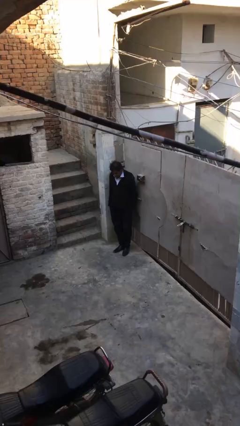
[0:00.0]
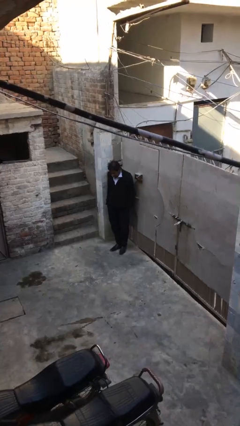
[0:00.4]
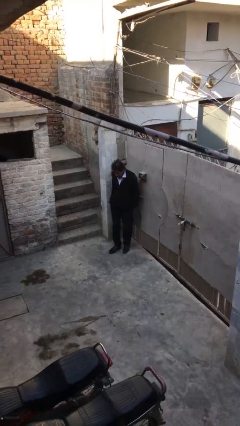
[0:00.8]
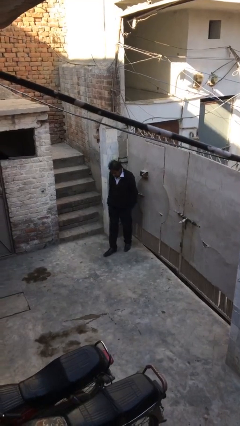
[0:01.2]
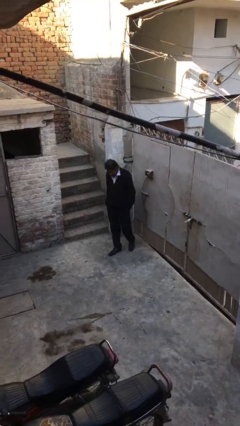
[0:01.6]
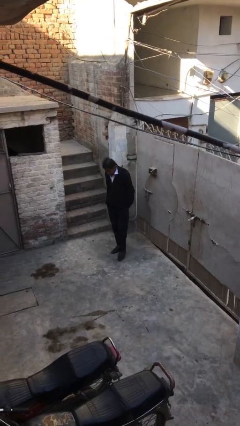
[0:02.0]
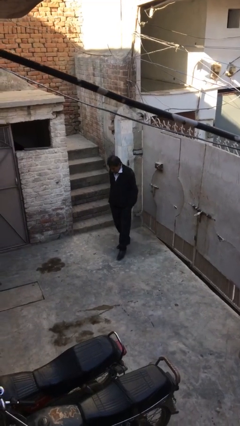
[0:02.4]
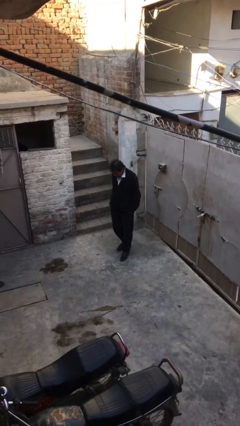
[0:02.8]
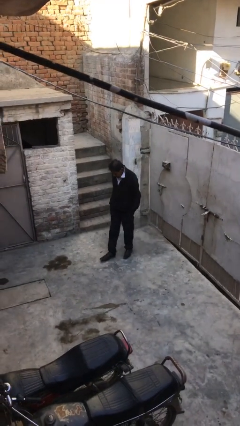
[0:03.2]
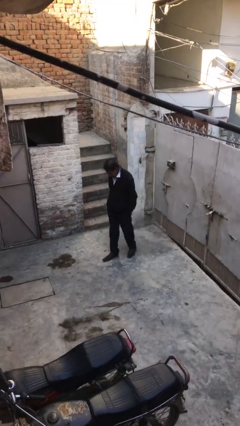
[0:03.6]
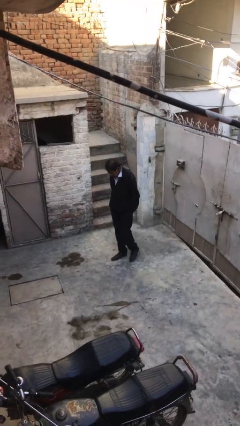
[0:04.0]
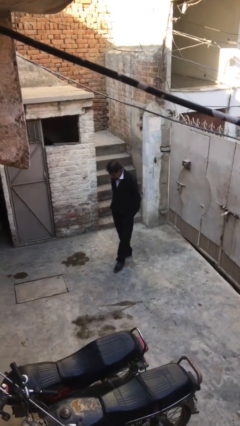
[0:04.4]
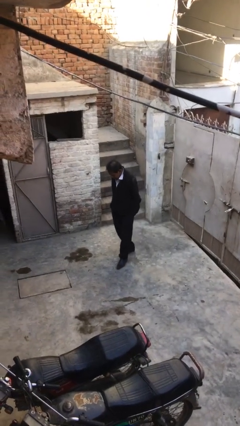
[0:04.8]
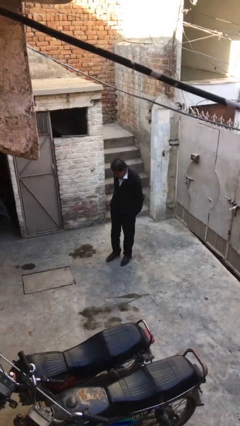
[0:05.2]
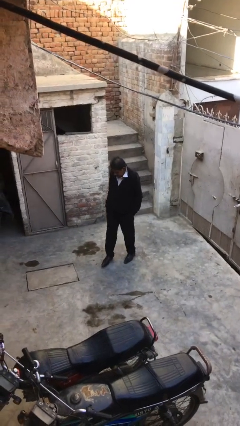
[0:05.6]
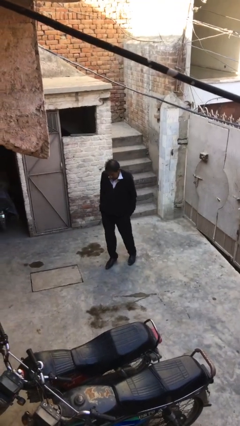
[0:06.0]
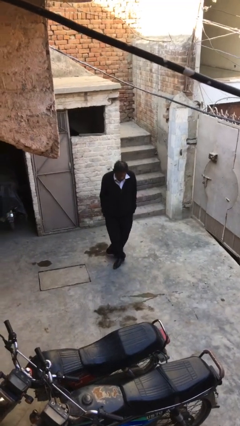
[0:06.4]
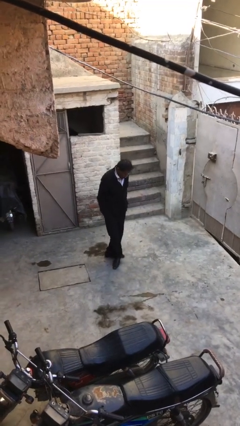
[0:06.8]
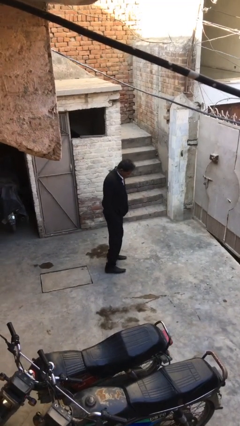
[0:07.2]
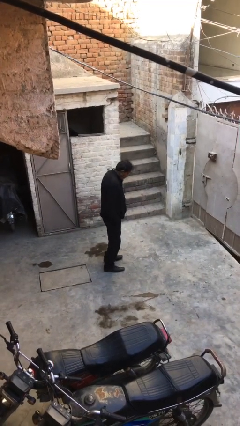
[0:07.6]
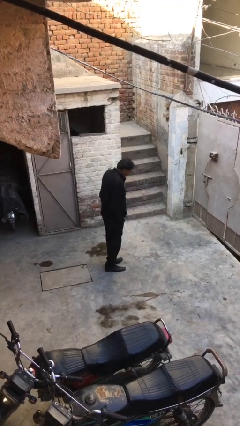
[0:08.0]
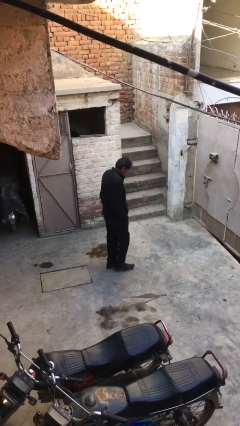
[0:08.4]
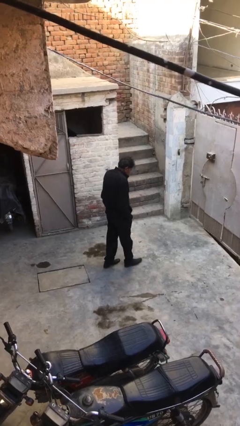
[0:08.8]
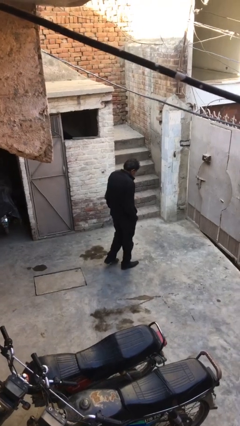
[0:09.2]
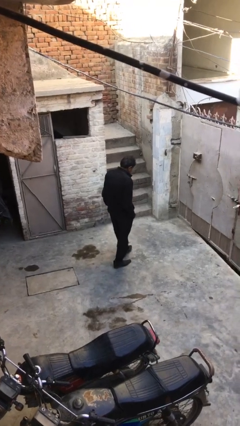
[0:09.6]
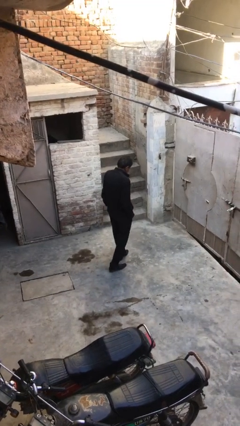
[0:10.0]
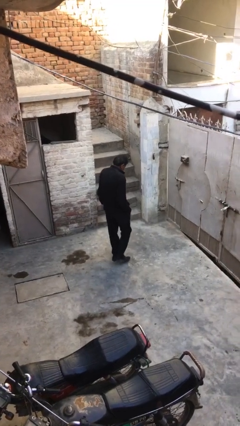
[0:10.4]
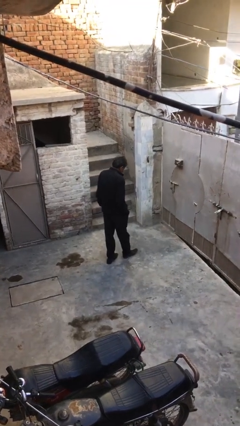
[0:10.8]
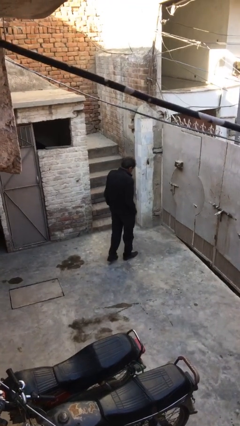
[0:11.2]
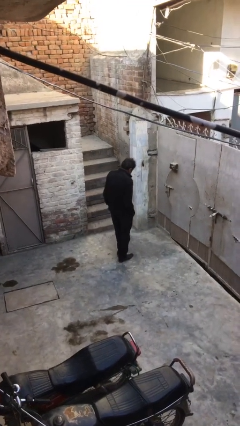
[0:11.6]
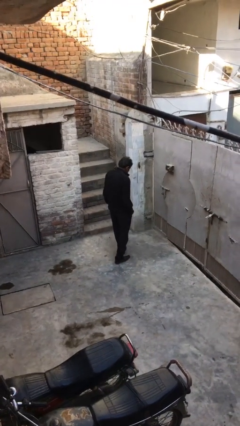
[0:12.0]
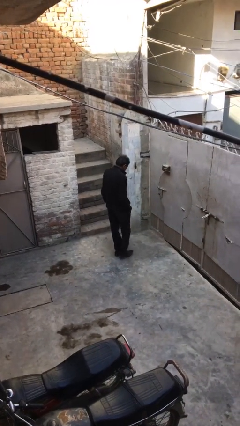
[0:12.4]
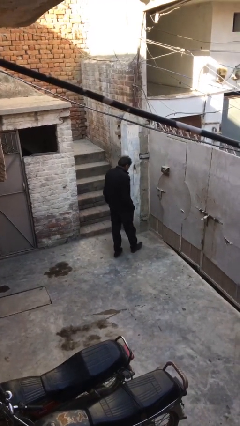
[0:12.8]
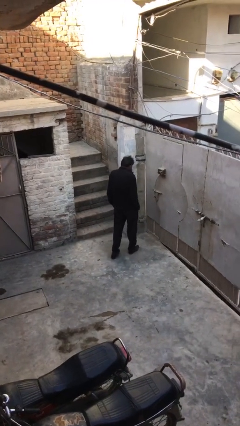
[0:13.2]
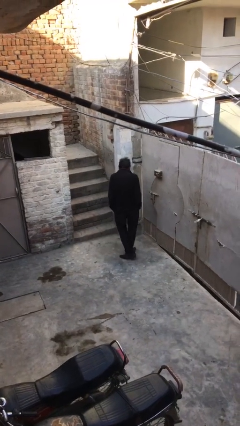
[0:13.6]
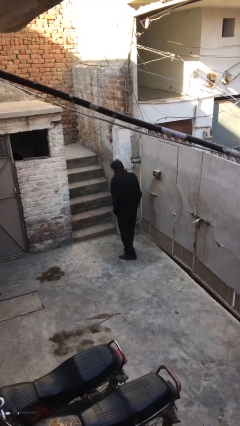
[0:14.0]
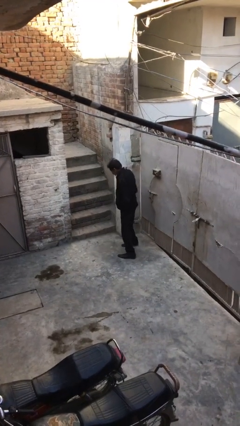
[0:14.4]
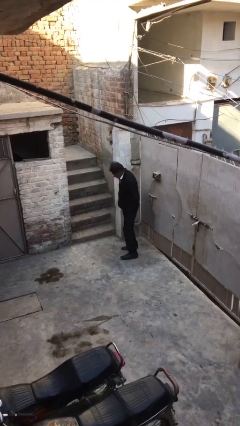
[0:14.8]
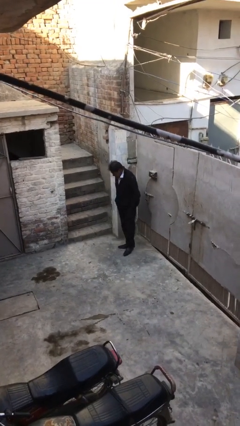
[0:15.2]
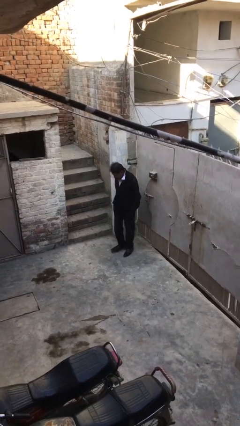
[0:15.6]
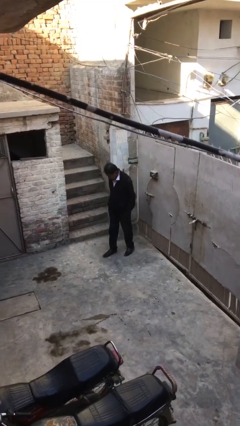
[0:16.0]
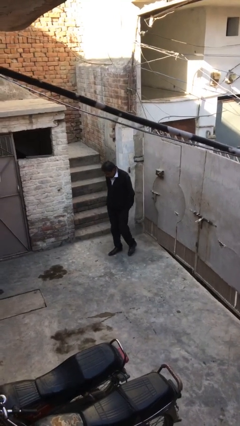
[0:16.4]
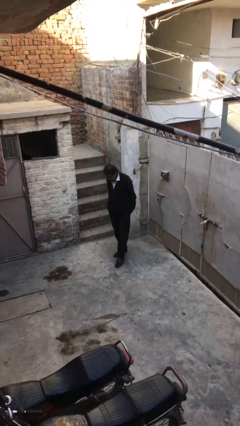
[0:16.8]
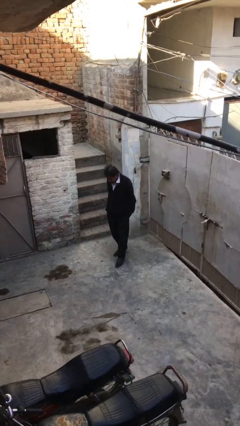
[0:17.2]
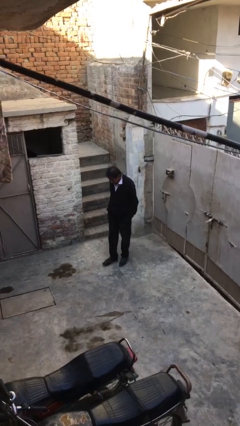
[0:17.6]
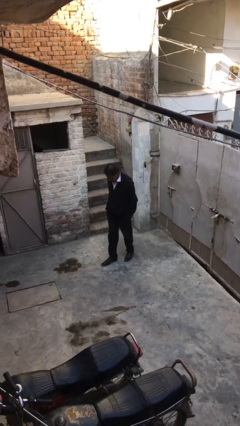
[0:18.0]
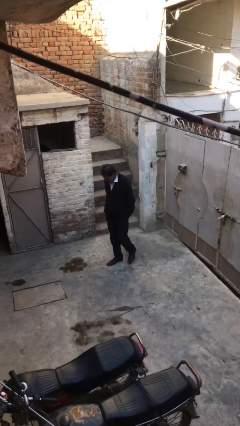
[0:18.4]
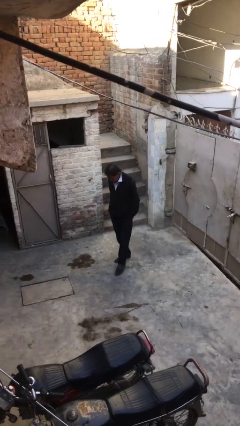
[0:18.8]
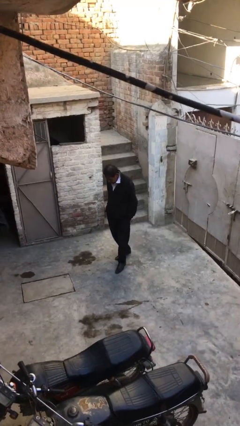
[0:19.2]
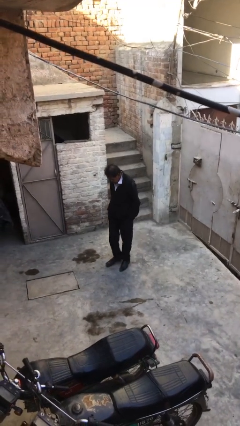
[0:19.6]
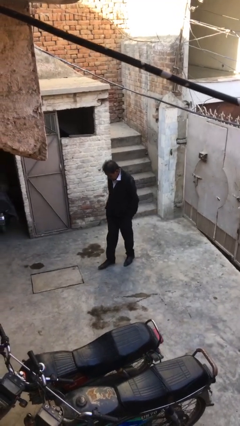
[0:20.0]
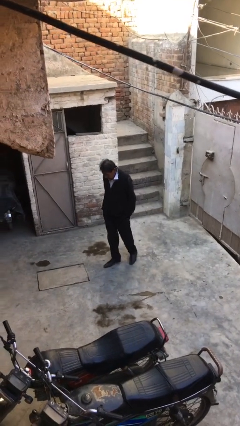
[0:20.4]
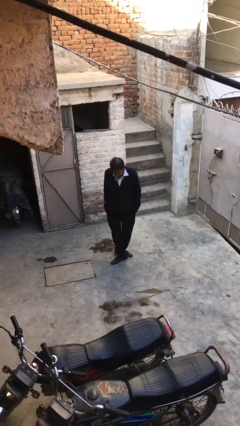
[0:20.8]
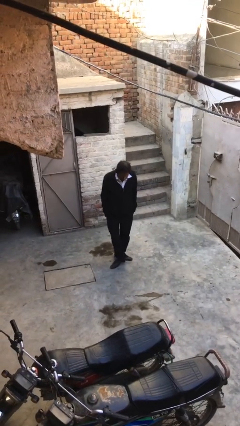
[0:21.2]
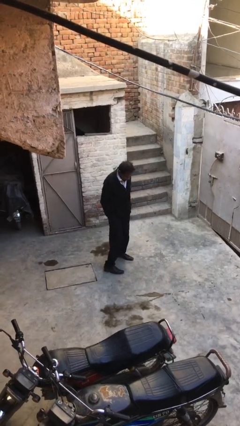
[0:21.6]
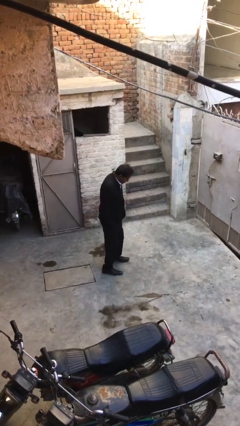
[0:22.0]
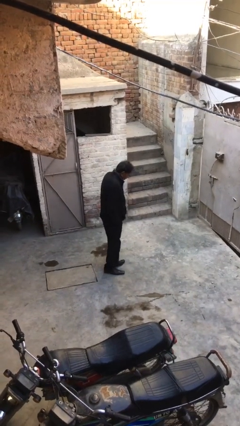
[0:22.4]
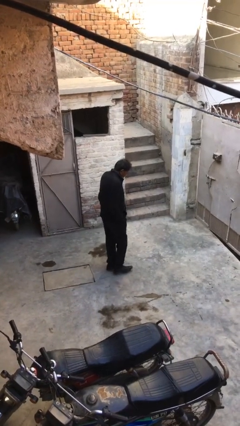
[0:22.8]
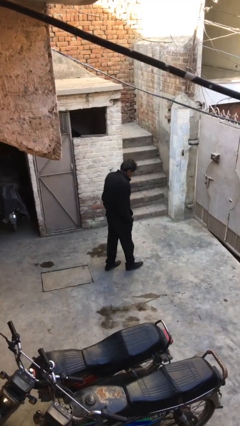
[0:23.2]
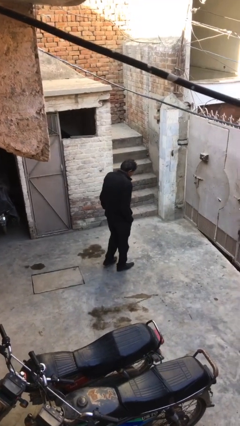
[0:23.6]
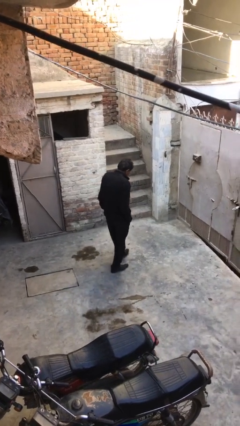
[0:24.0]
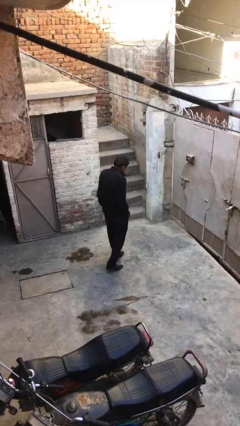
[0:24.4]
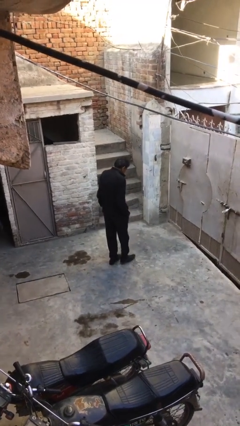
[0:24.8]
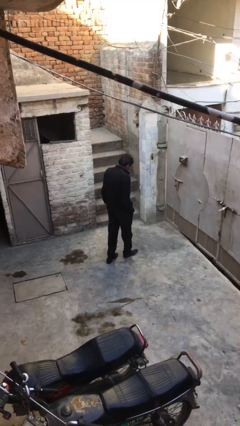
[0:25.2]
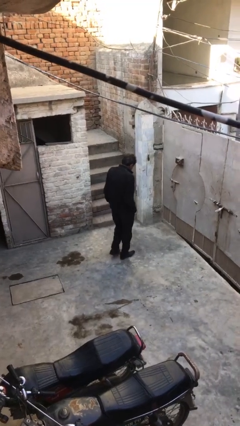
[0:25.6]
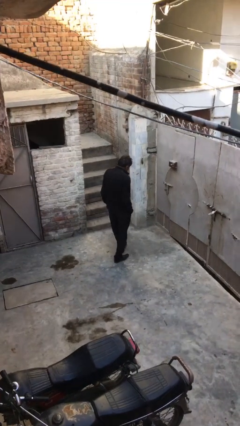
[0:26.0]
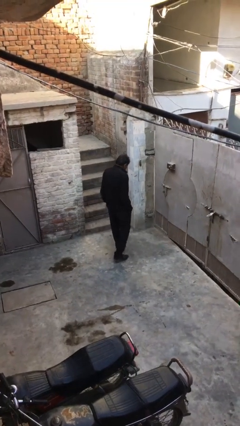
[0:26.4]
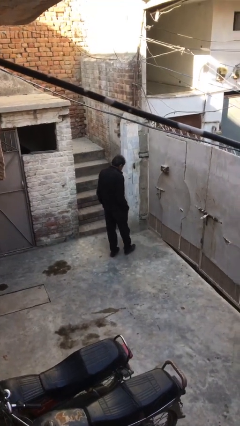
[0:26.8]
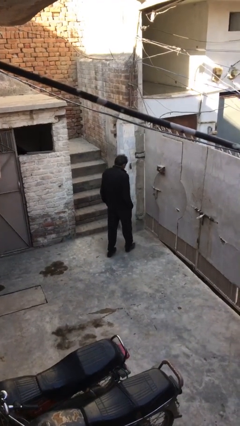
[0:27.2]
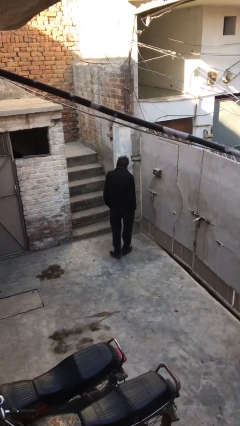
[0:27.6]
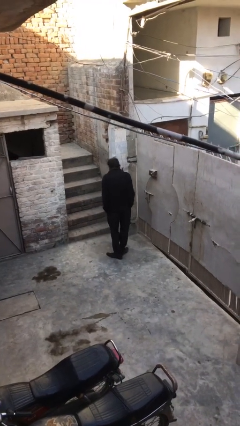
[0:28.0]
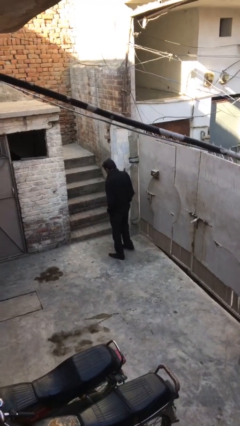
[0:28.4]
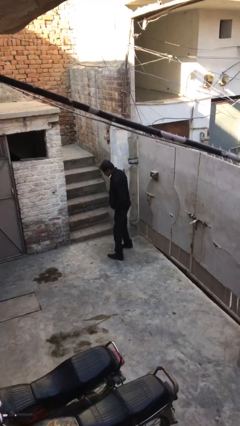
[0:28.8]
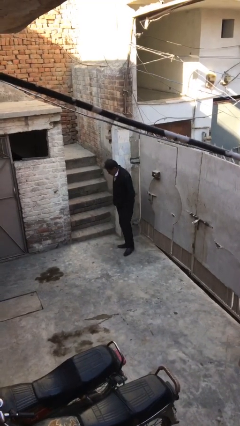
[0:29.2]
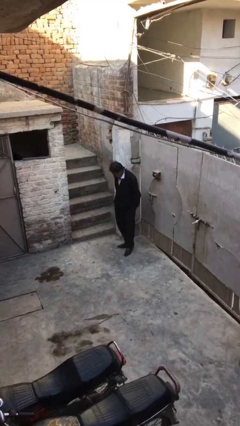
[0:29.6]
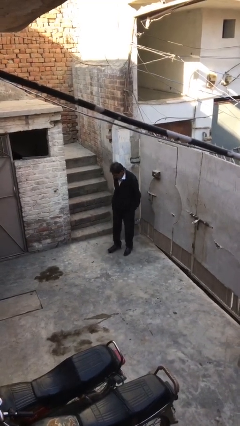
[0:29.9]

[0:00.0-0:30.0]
person walks

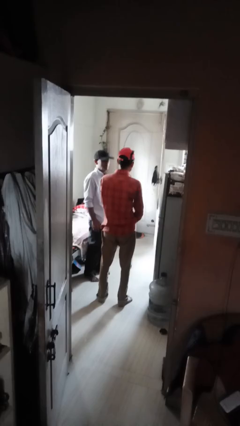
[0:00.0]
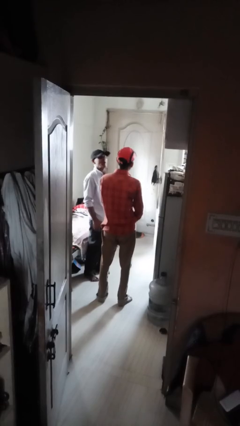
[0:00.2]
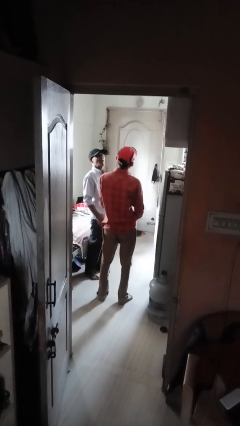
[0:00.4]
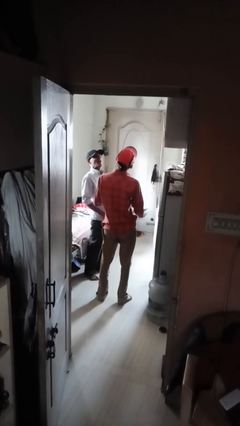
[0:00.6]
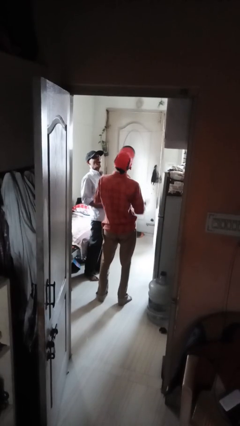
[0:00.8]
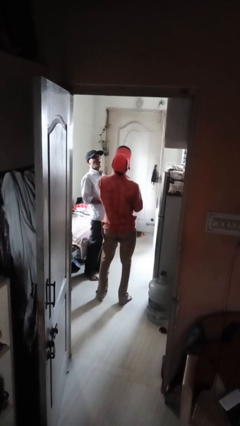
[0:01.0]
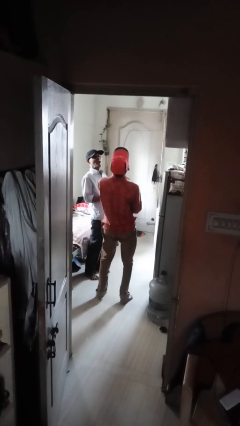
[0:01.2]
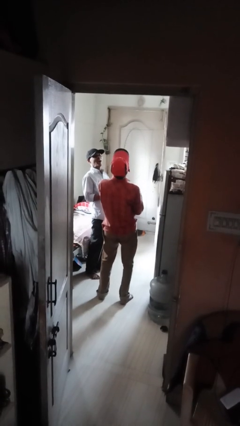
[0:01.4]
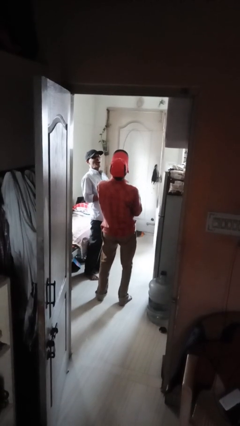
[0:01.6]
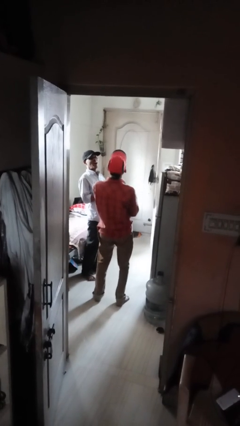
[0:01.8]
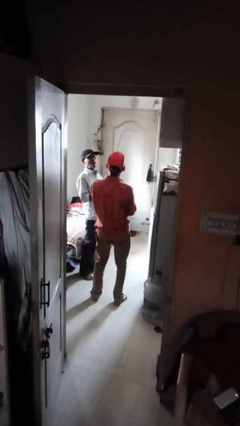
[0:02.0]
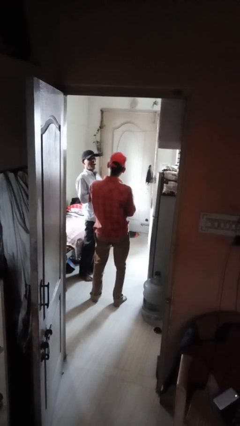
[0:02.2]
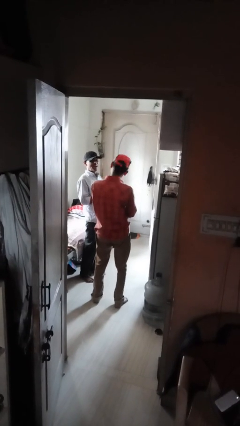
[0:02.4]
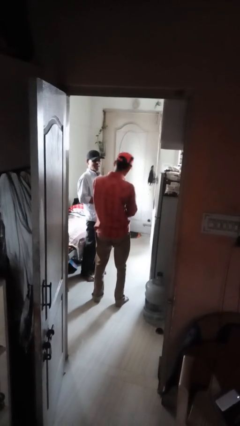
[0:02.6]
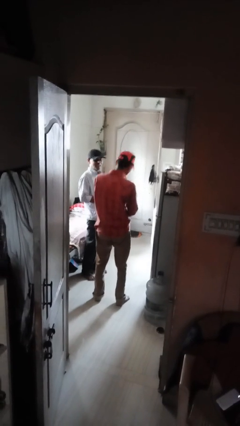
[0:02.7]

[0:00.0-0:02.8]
person laughs with person

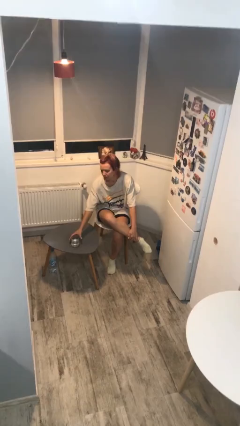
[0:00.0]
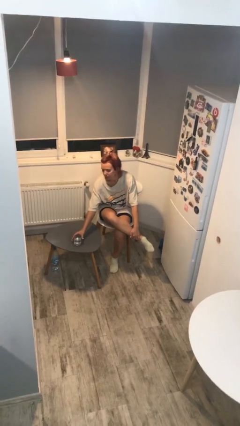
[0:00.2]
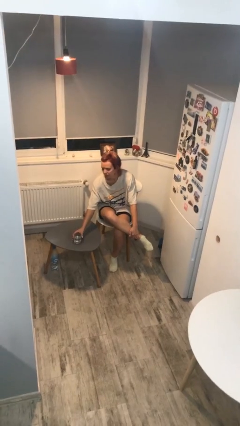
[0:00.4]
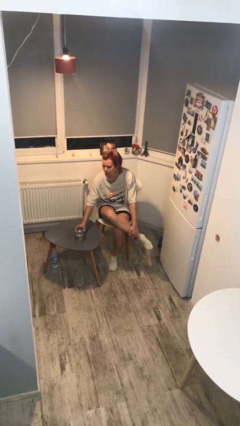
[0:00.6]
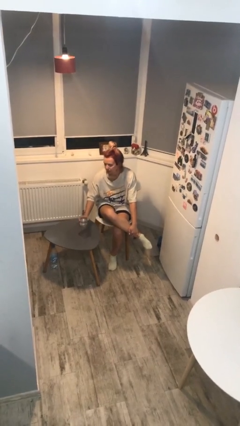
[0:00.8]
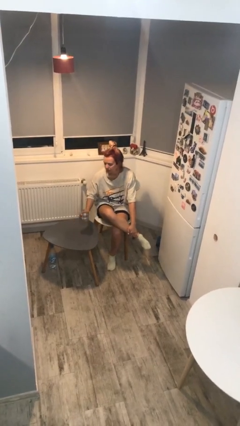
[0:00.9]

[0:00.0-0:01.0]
person picks up object from table
